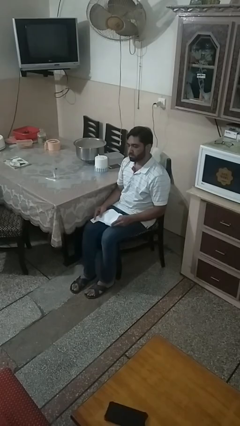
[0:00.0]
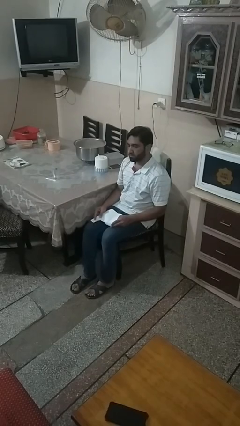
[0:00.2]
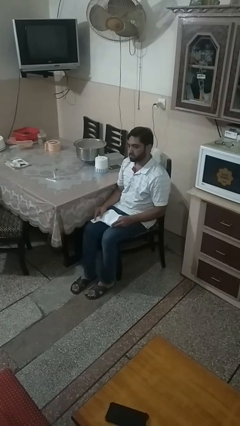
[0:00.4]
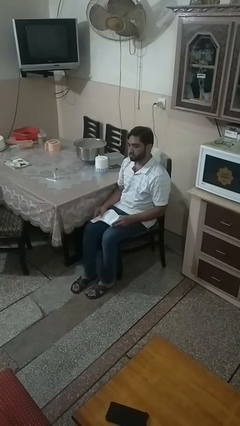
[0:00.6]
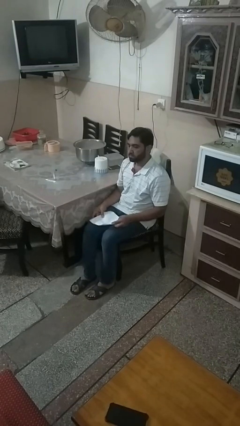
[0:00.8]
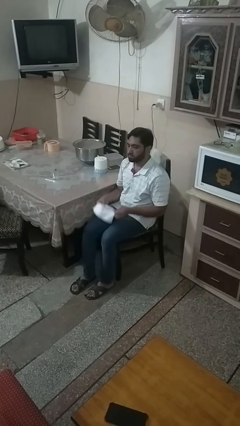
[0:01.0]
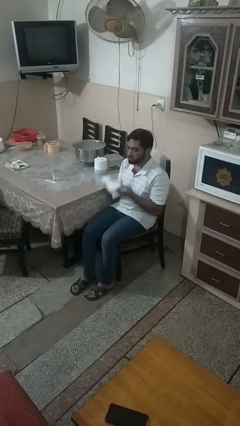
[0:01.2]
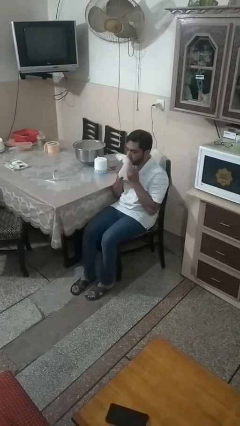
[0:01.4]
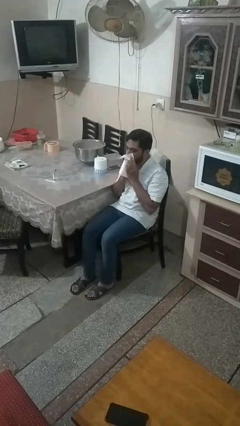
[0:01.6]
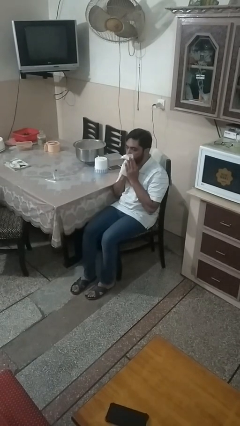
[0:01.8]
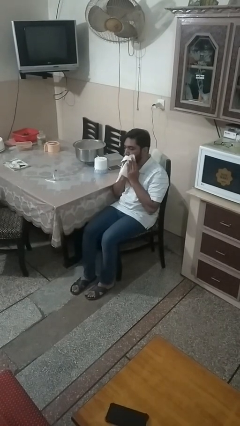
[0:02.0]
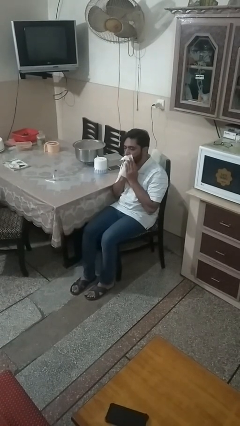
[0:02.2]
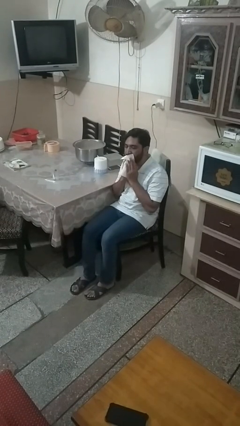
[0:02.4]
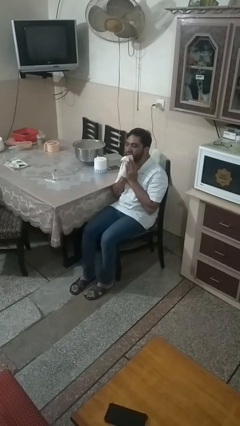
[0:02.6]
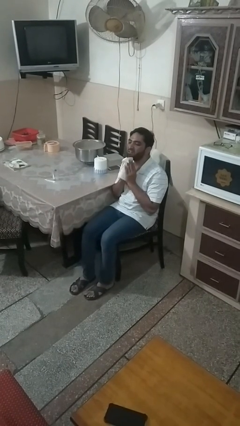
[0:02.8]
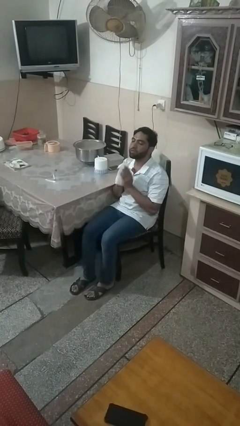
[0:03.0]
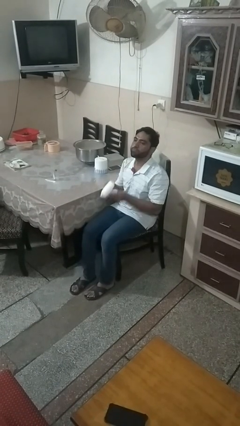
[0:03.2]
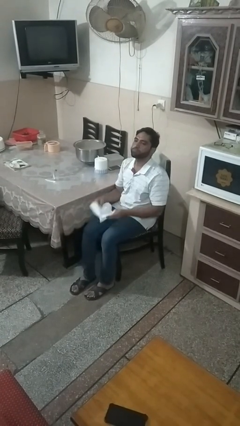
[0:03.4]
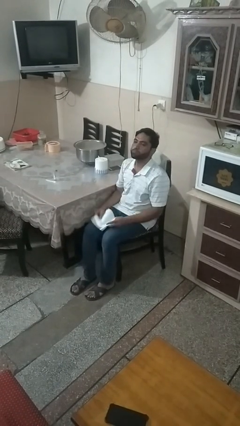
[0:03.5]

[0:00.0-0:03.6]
person wipes mouth with napkin

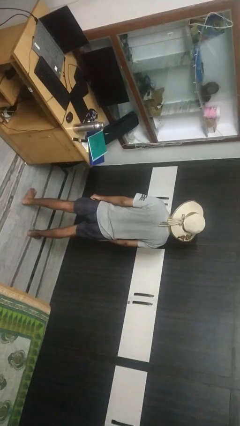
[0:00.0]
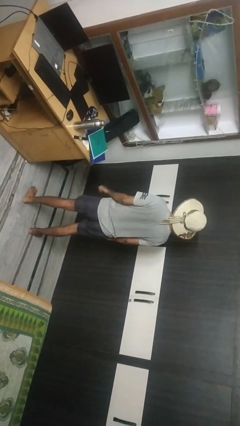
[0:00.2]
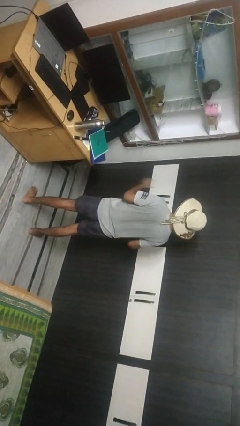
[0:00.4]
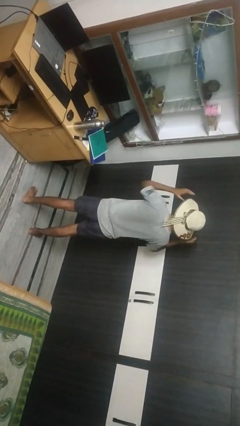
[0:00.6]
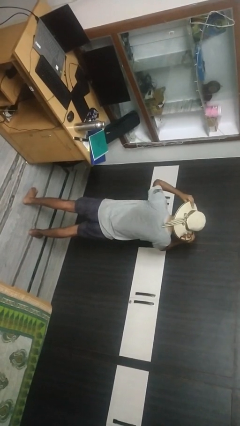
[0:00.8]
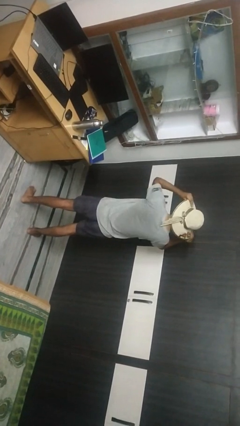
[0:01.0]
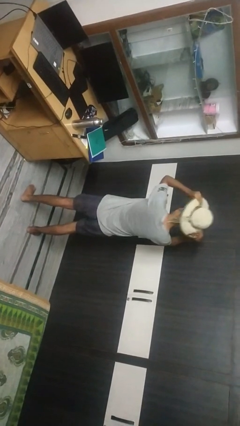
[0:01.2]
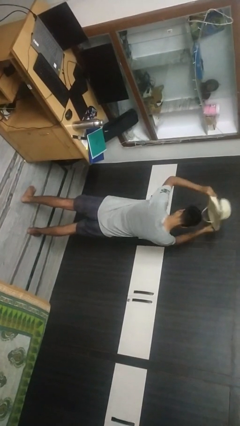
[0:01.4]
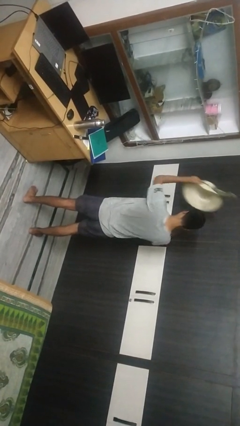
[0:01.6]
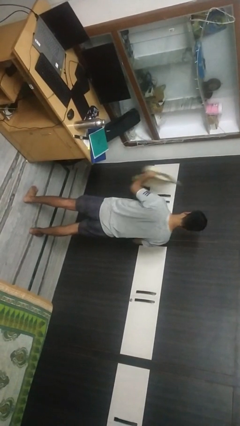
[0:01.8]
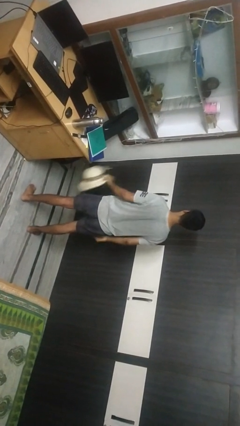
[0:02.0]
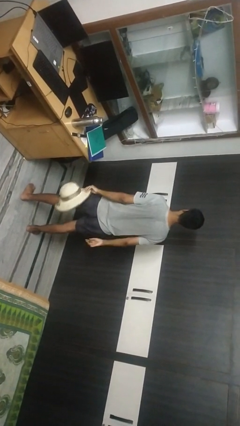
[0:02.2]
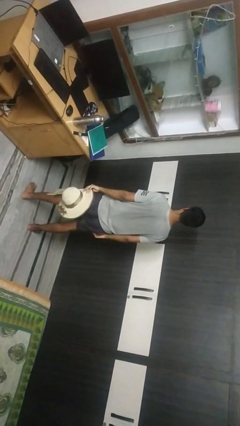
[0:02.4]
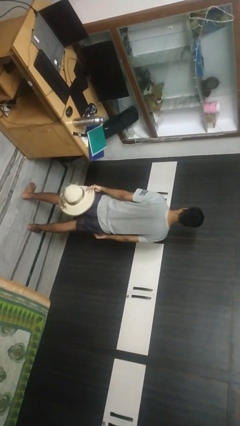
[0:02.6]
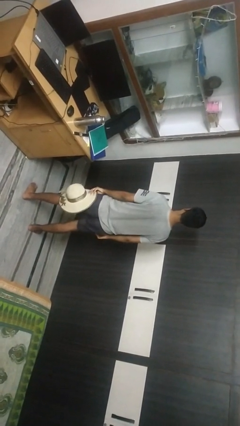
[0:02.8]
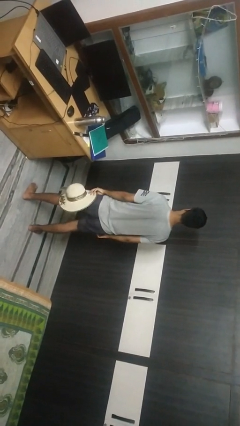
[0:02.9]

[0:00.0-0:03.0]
person takes off hat

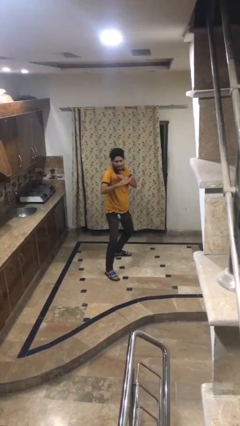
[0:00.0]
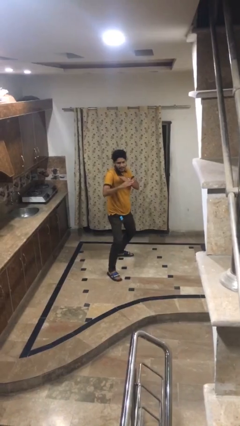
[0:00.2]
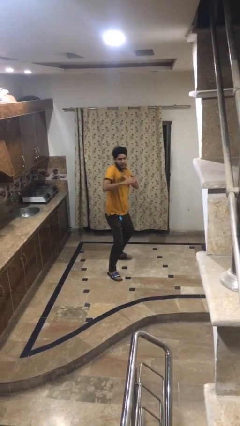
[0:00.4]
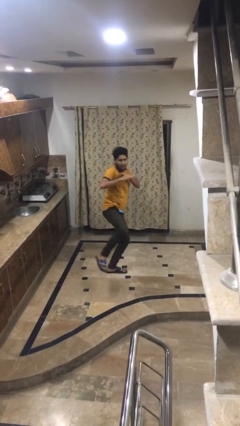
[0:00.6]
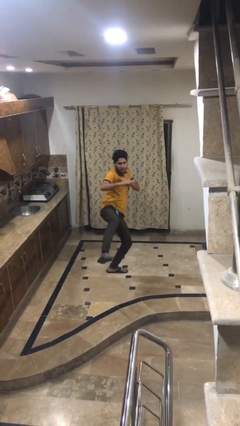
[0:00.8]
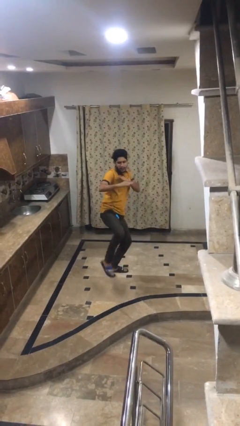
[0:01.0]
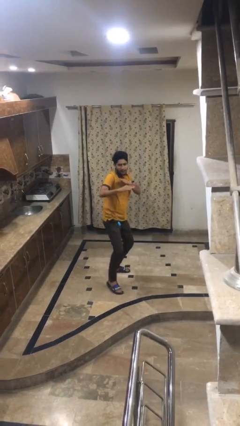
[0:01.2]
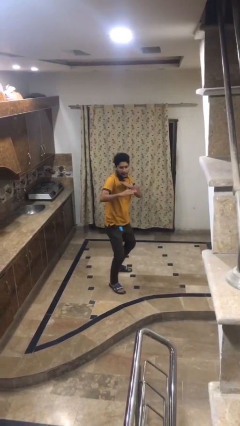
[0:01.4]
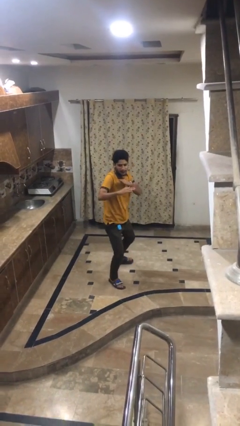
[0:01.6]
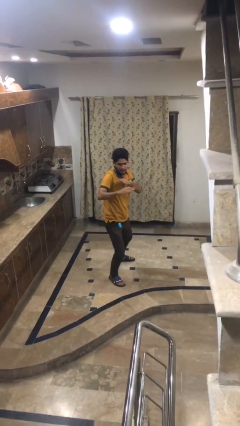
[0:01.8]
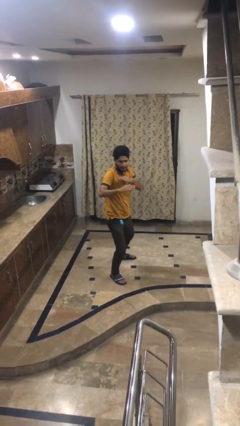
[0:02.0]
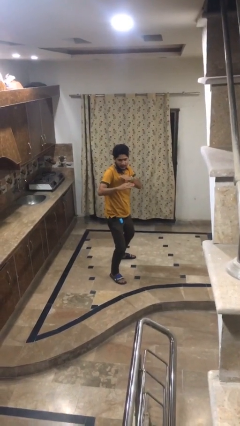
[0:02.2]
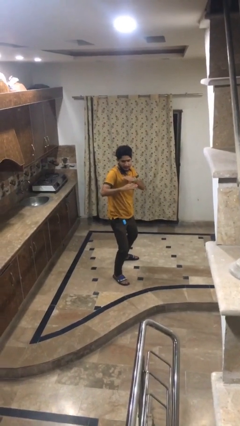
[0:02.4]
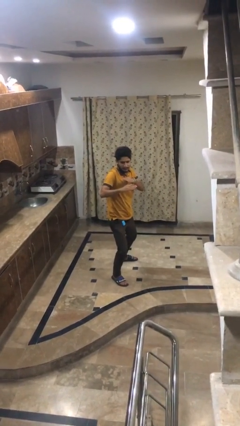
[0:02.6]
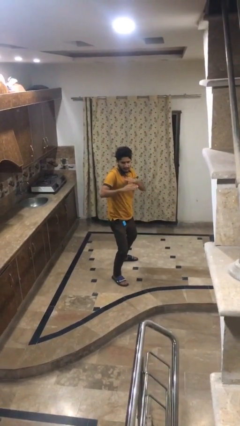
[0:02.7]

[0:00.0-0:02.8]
person karate kicks

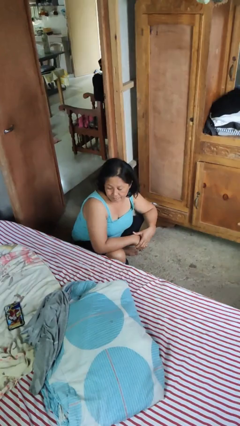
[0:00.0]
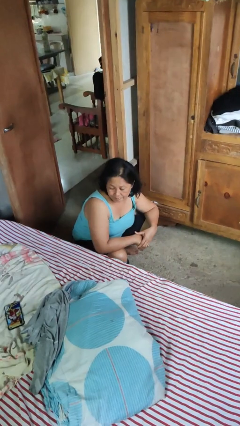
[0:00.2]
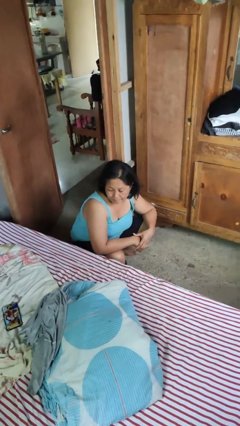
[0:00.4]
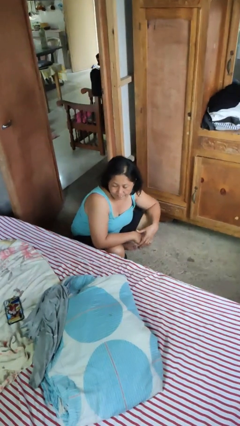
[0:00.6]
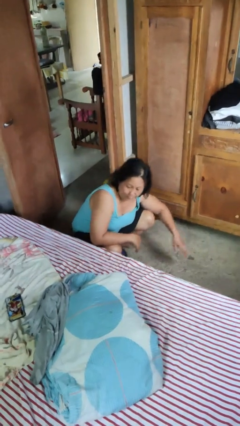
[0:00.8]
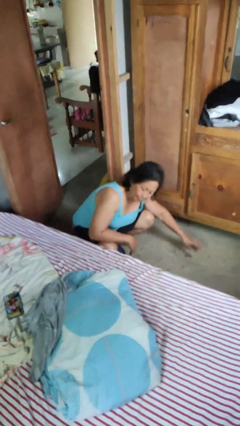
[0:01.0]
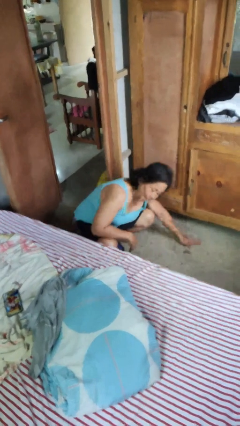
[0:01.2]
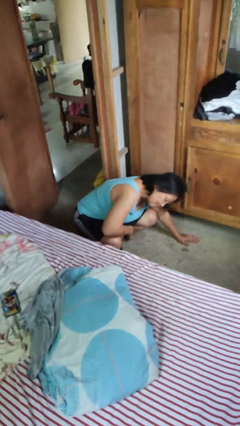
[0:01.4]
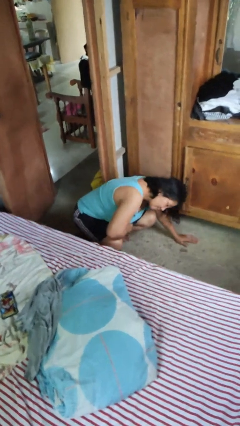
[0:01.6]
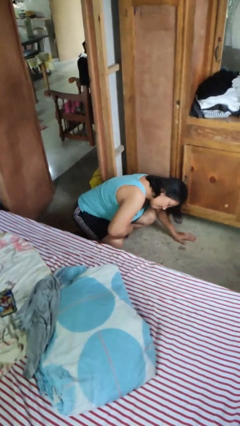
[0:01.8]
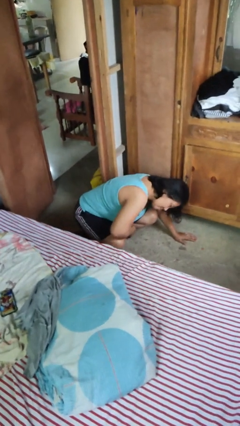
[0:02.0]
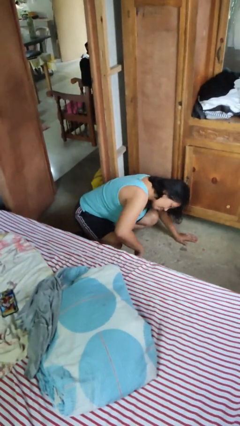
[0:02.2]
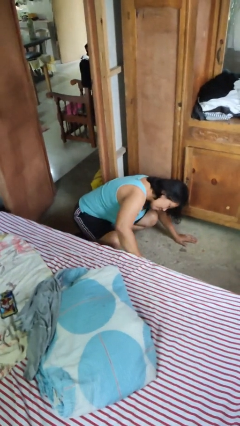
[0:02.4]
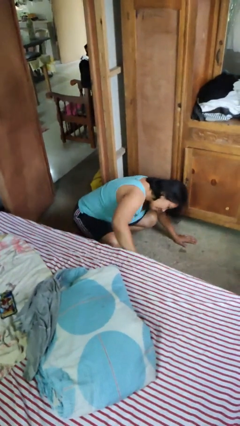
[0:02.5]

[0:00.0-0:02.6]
person searches under bed

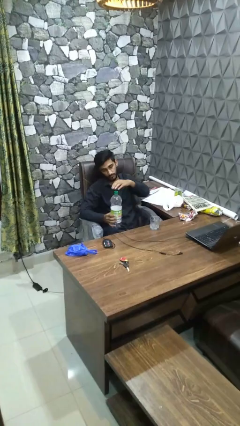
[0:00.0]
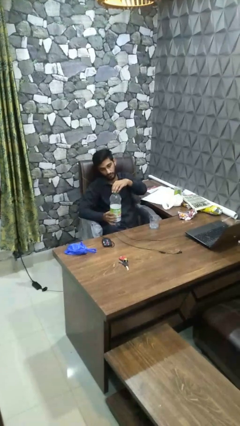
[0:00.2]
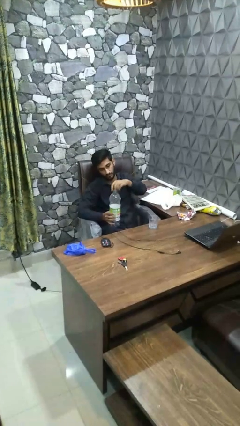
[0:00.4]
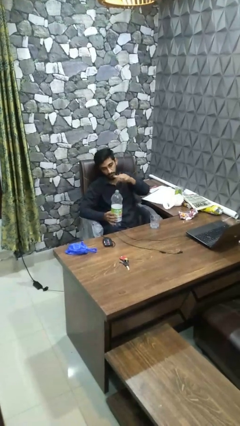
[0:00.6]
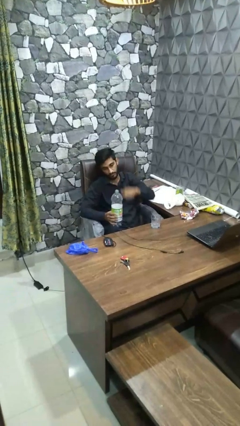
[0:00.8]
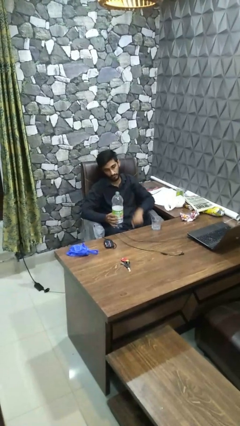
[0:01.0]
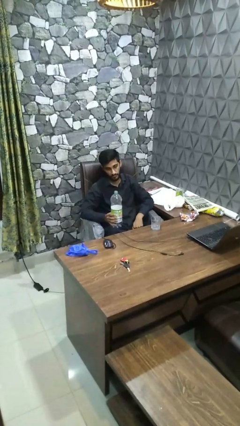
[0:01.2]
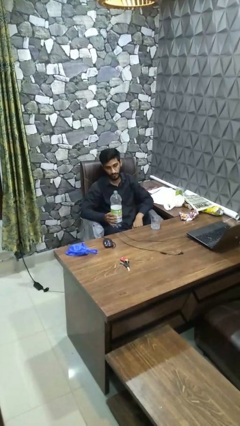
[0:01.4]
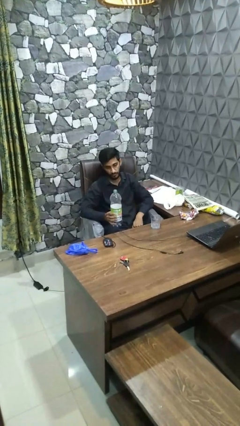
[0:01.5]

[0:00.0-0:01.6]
person unscrews lid from bottle

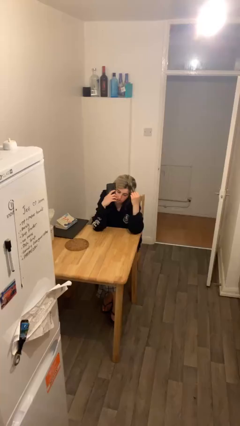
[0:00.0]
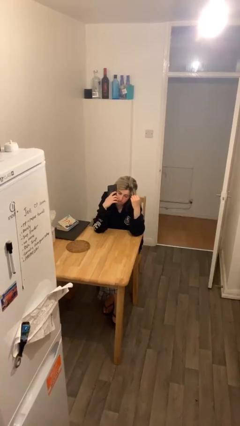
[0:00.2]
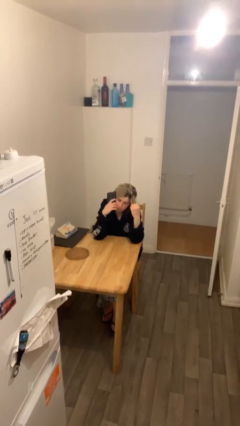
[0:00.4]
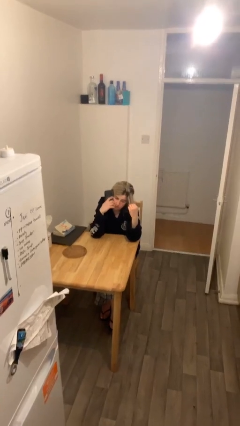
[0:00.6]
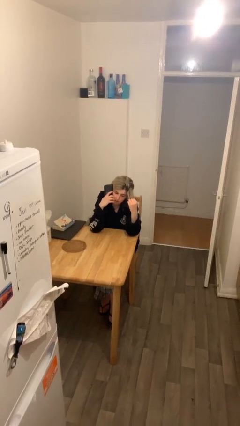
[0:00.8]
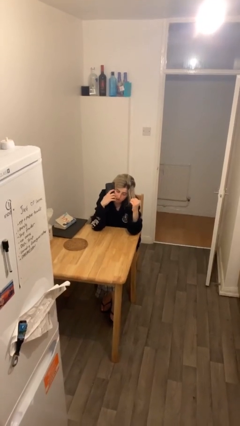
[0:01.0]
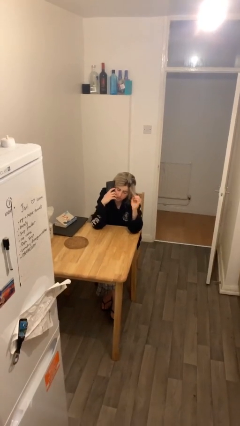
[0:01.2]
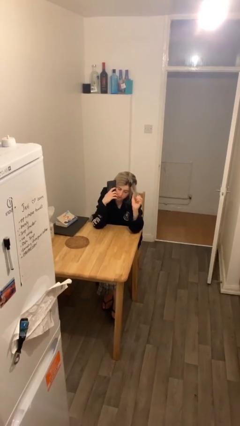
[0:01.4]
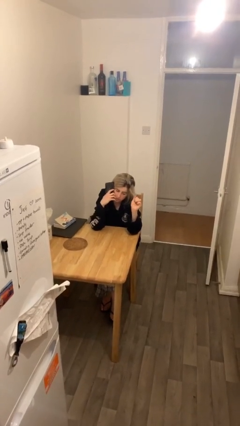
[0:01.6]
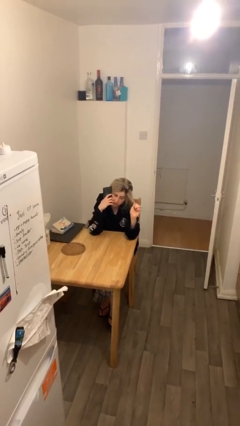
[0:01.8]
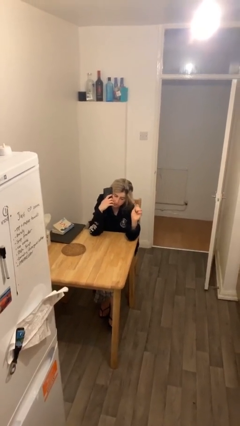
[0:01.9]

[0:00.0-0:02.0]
person talks on phone

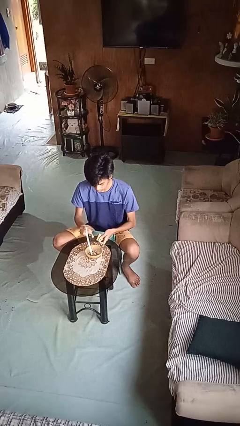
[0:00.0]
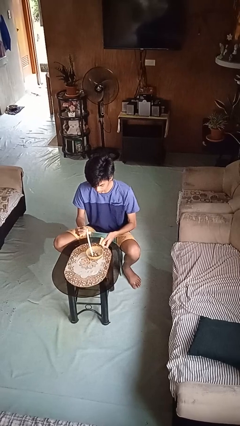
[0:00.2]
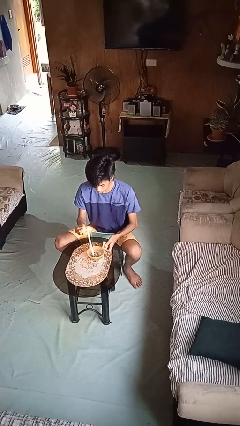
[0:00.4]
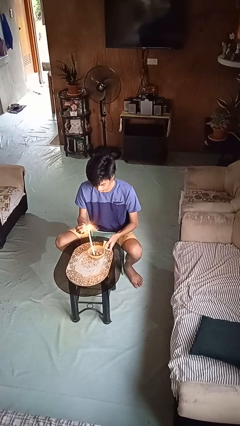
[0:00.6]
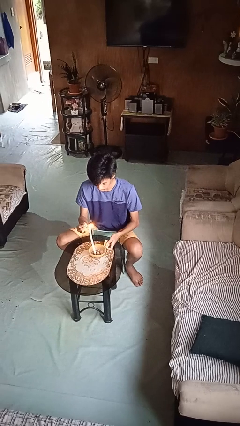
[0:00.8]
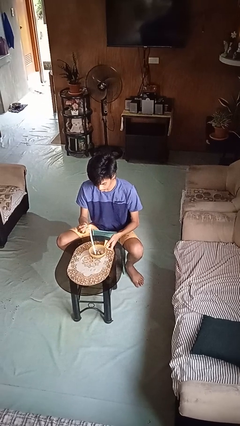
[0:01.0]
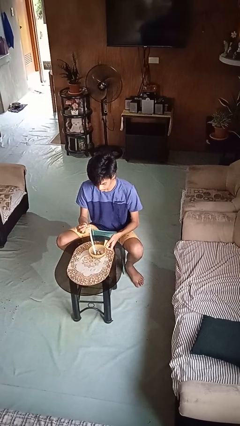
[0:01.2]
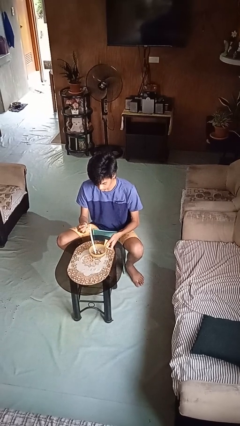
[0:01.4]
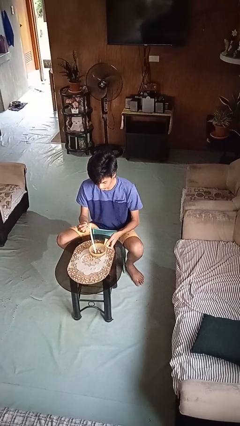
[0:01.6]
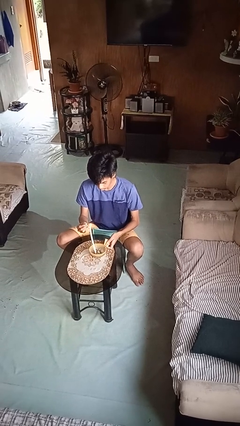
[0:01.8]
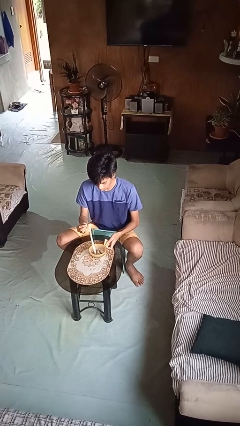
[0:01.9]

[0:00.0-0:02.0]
person lights candle
